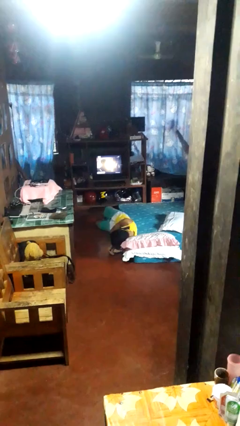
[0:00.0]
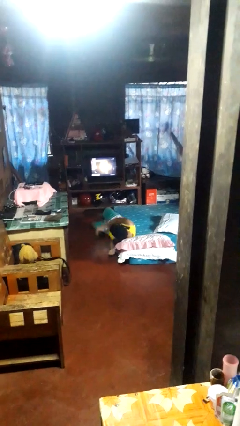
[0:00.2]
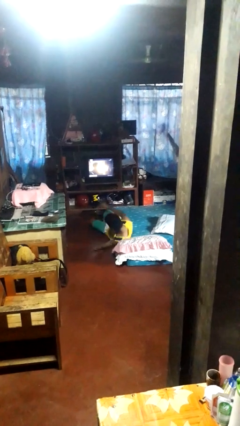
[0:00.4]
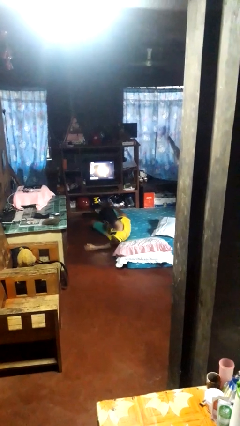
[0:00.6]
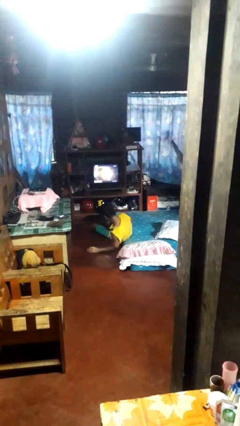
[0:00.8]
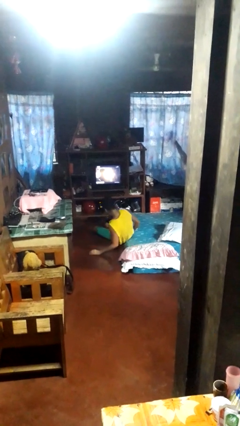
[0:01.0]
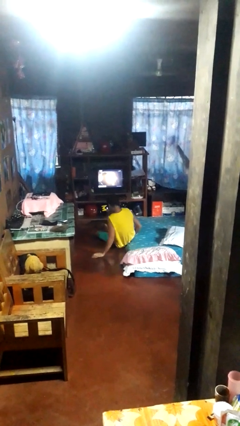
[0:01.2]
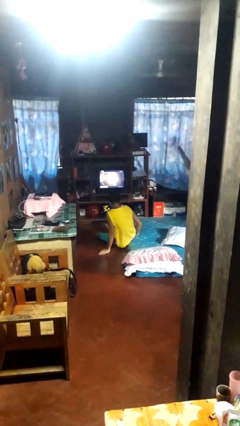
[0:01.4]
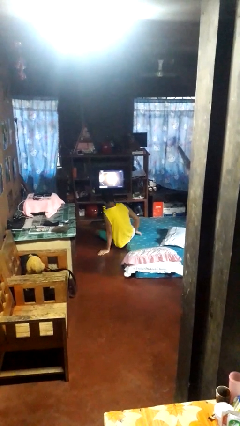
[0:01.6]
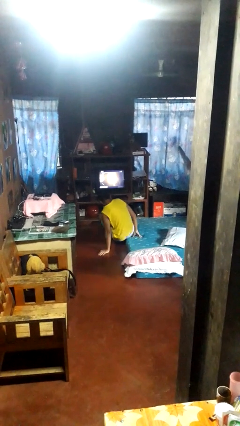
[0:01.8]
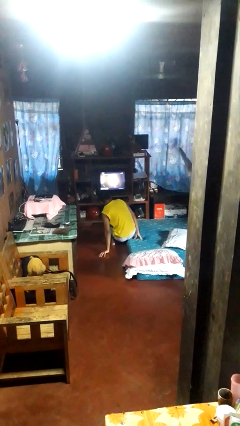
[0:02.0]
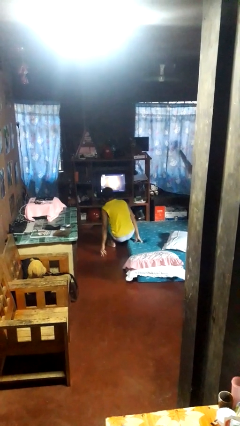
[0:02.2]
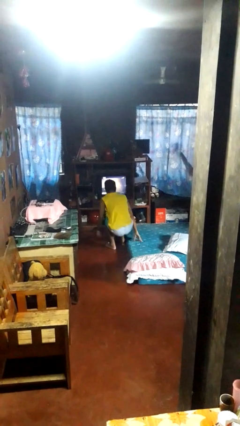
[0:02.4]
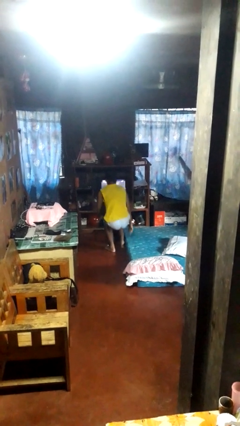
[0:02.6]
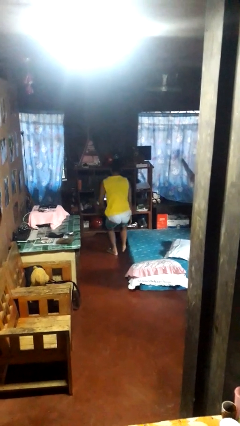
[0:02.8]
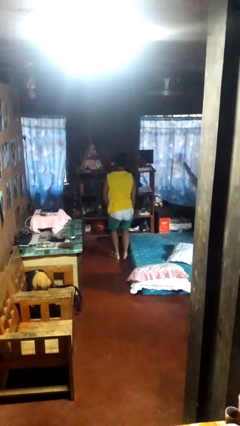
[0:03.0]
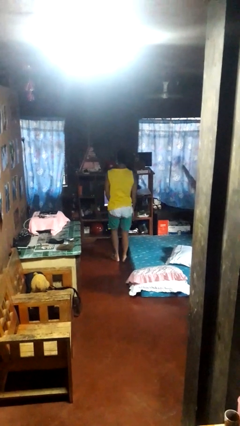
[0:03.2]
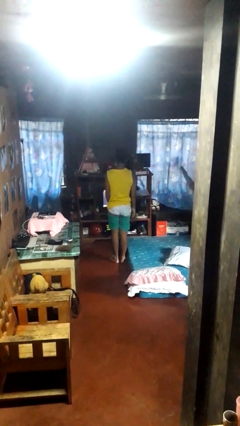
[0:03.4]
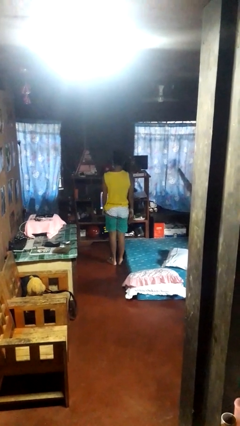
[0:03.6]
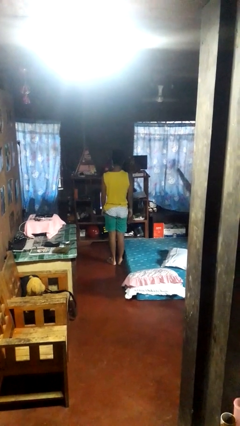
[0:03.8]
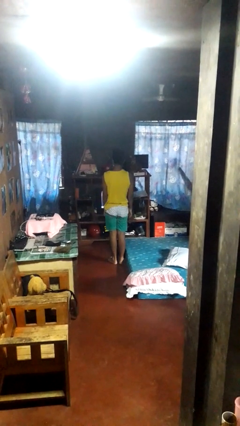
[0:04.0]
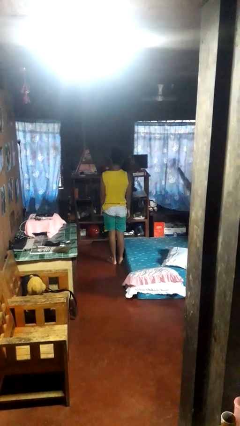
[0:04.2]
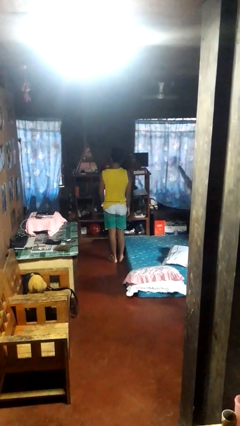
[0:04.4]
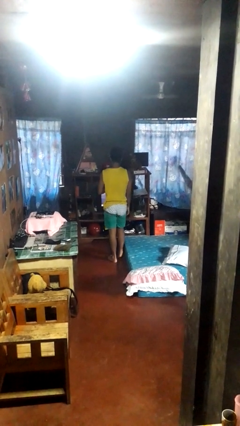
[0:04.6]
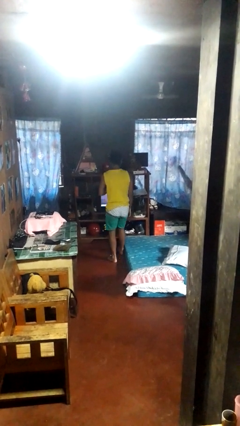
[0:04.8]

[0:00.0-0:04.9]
person stands up from floor

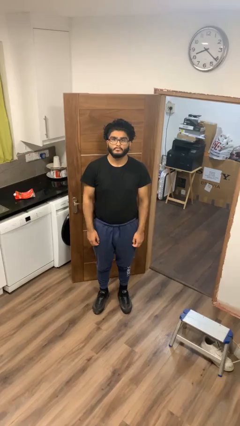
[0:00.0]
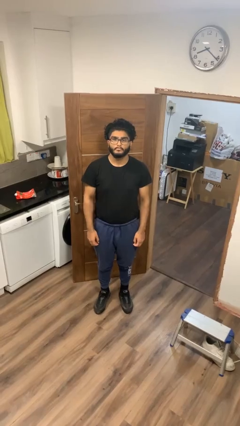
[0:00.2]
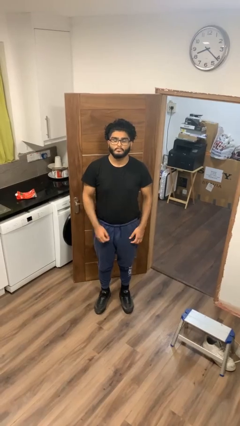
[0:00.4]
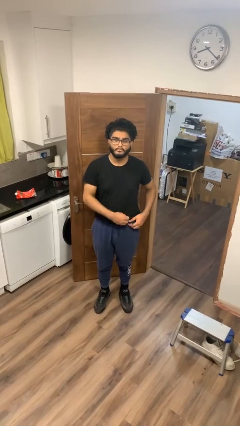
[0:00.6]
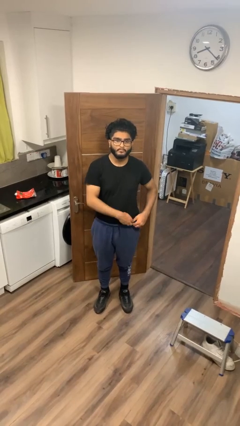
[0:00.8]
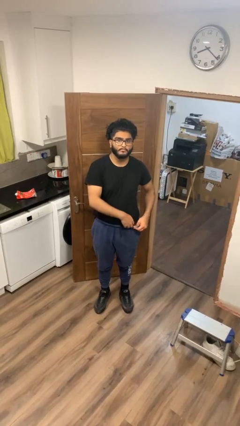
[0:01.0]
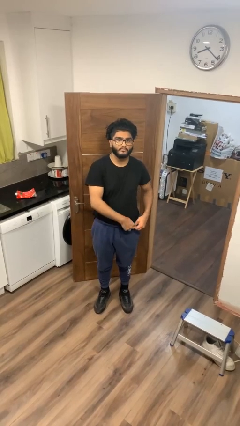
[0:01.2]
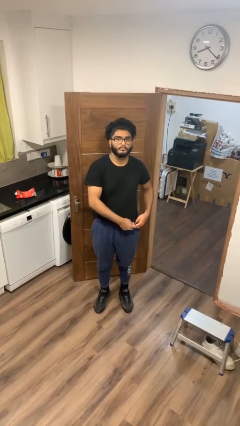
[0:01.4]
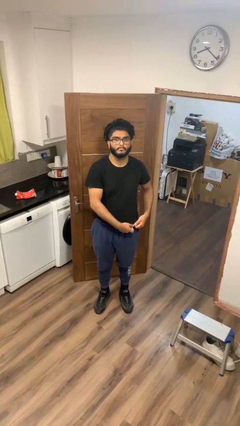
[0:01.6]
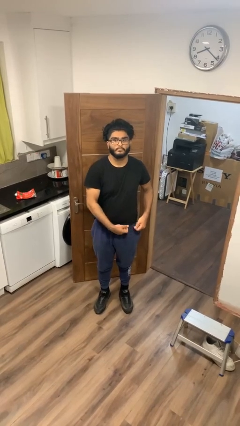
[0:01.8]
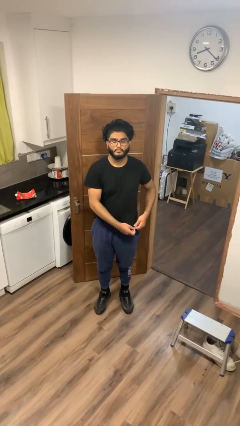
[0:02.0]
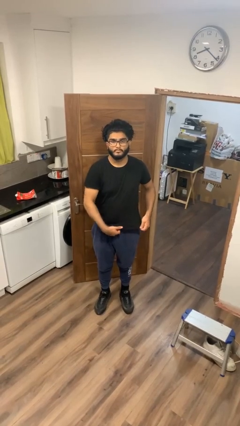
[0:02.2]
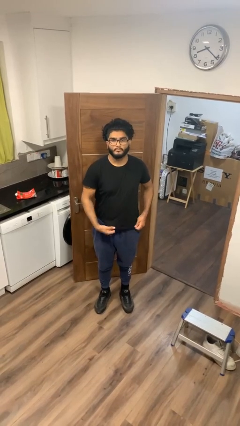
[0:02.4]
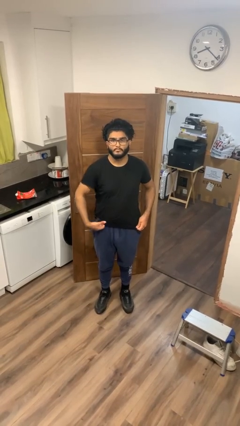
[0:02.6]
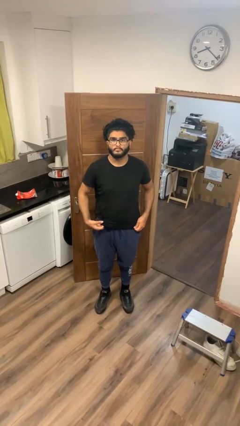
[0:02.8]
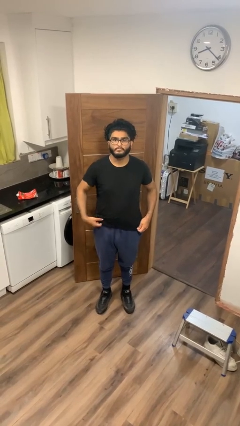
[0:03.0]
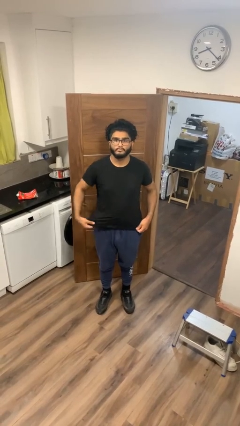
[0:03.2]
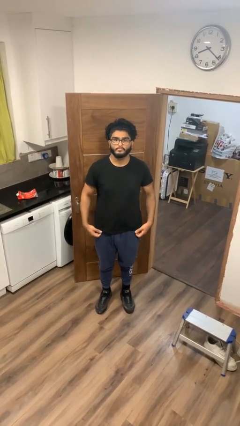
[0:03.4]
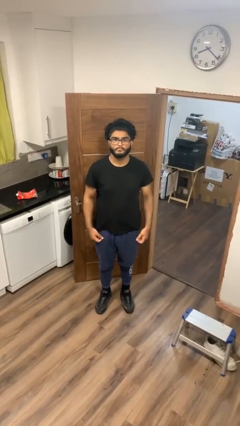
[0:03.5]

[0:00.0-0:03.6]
person untucks shirt

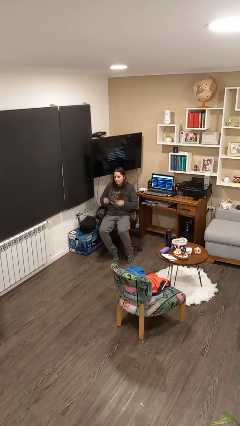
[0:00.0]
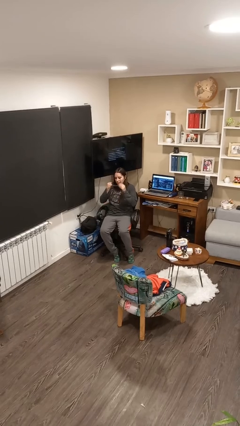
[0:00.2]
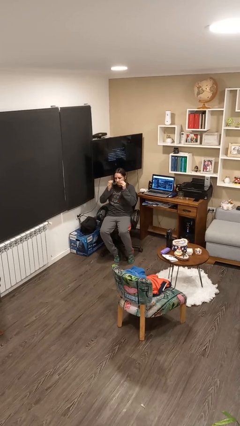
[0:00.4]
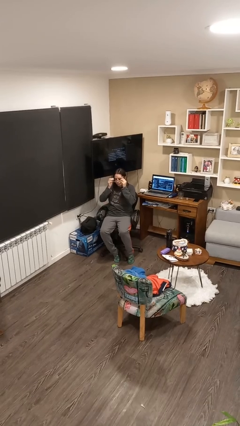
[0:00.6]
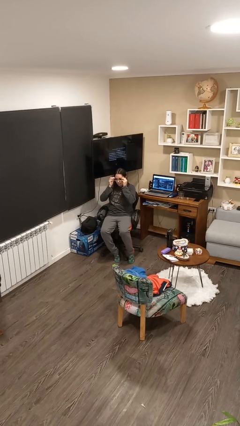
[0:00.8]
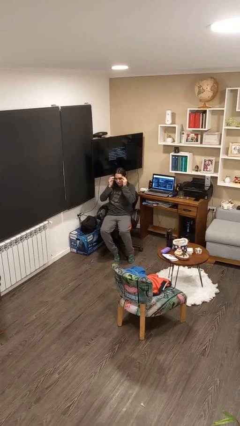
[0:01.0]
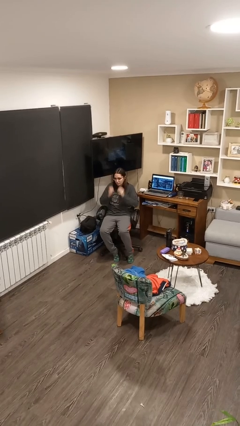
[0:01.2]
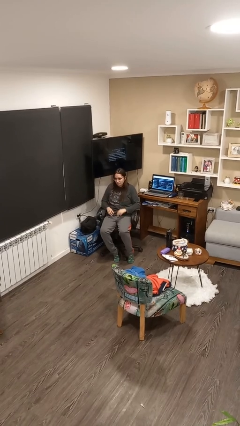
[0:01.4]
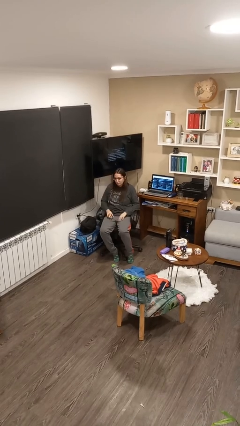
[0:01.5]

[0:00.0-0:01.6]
person puts on glasses

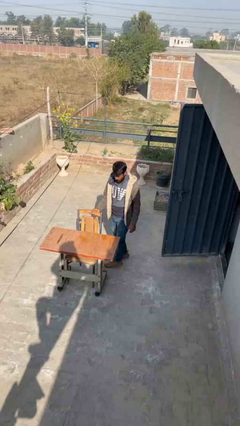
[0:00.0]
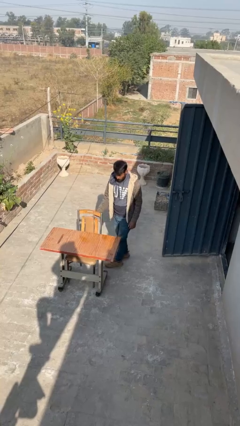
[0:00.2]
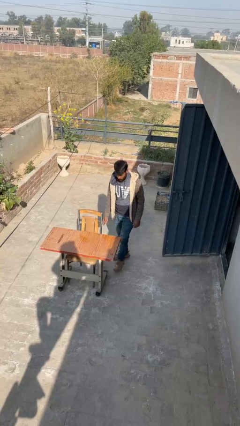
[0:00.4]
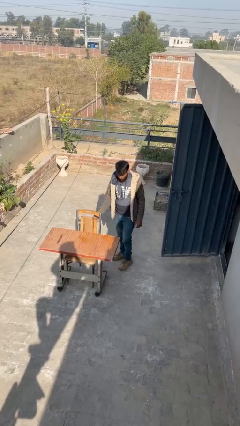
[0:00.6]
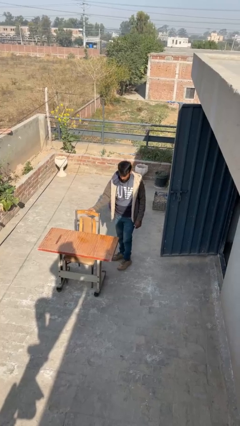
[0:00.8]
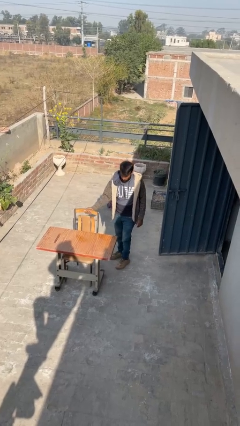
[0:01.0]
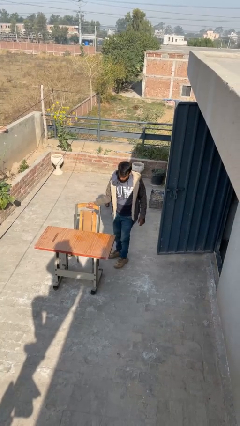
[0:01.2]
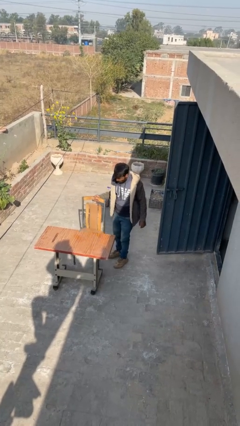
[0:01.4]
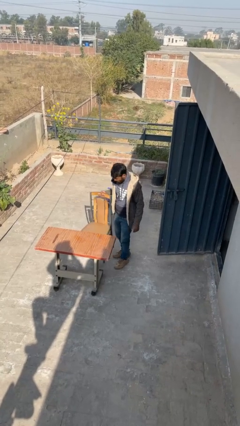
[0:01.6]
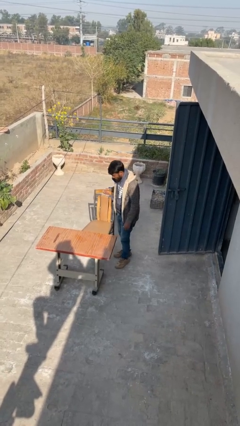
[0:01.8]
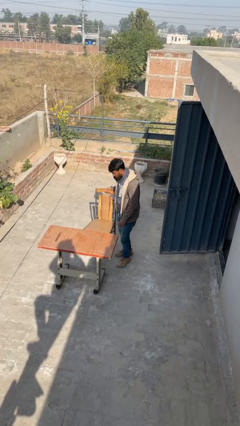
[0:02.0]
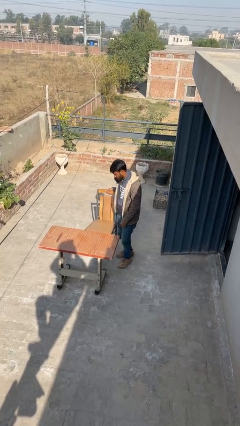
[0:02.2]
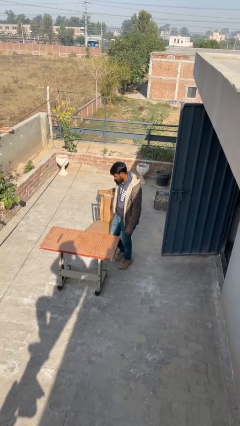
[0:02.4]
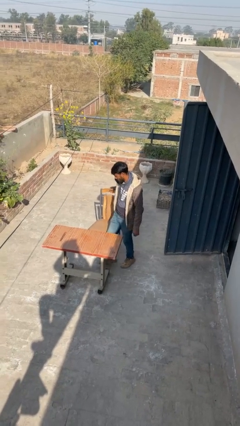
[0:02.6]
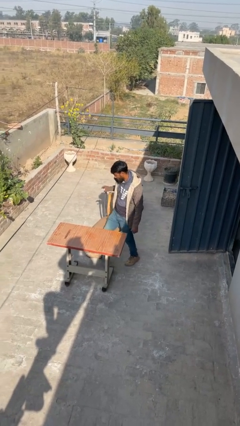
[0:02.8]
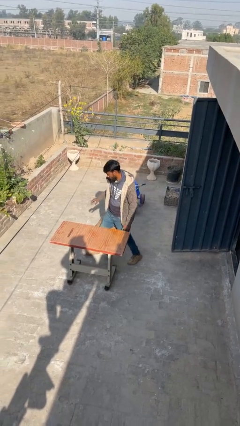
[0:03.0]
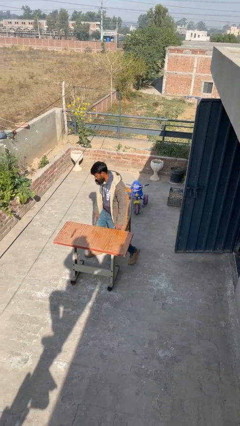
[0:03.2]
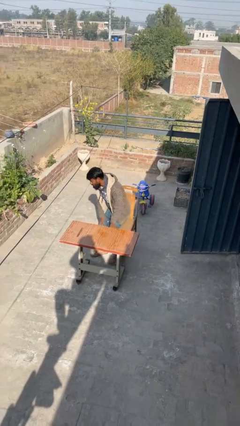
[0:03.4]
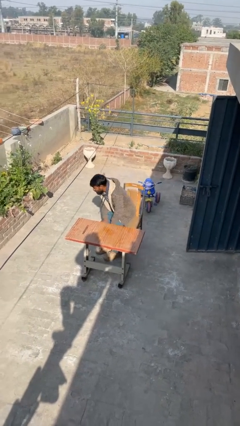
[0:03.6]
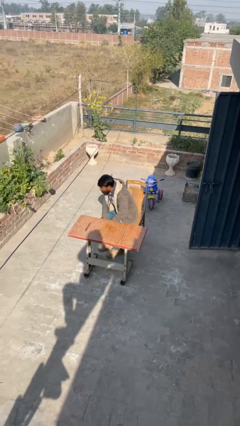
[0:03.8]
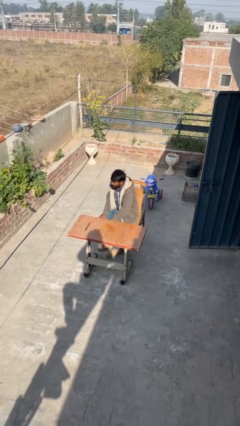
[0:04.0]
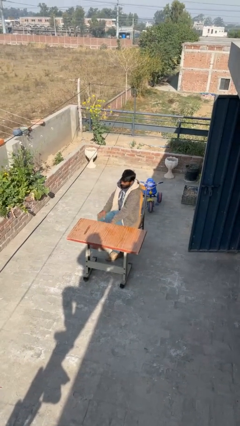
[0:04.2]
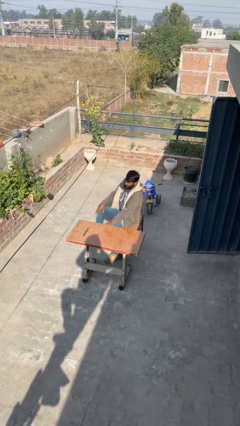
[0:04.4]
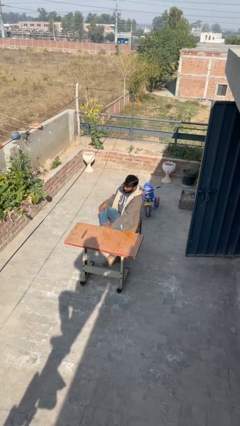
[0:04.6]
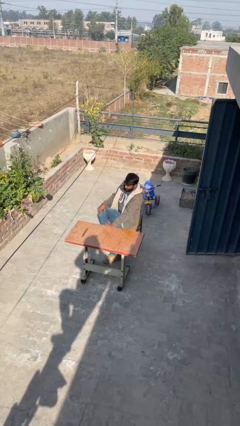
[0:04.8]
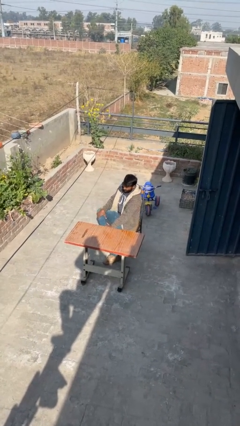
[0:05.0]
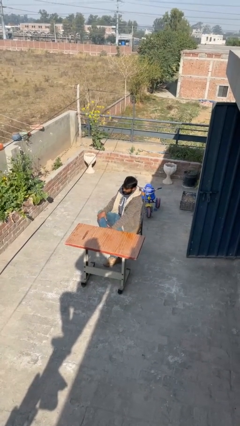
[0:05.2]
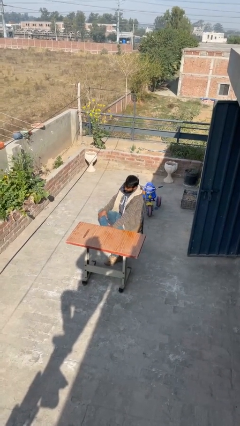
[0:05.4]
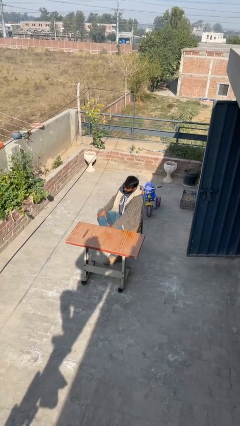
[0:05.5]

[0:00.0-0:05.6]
person sits down

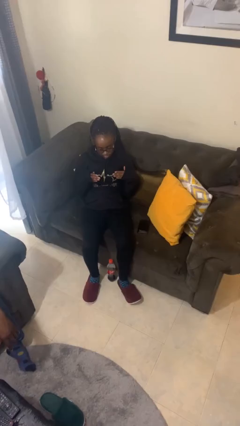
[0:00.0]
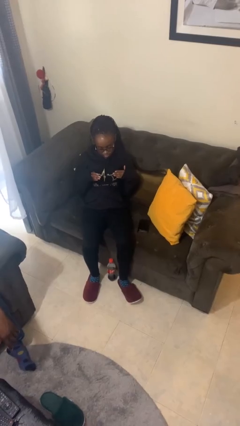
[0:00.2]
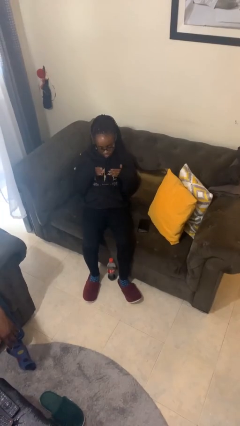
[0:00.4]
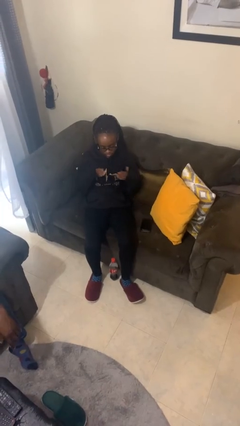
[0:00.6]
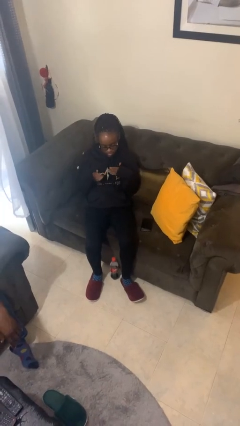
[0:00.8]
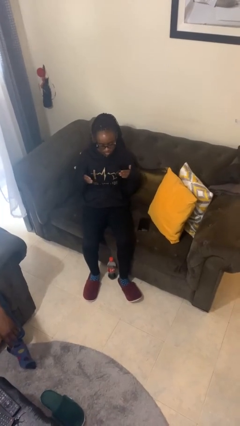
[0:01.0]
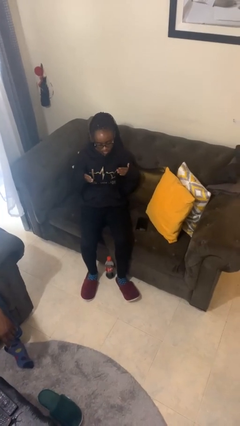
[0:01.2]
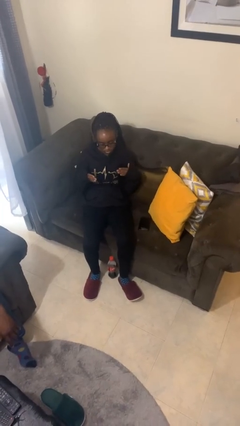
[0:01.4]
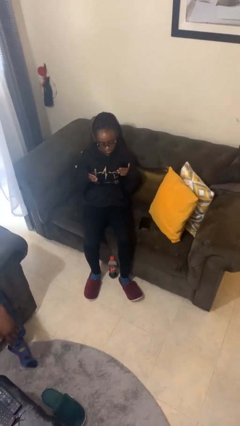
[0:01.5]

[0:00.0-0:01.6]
person drums on chest

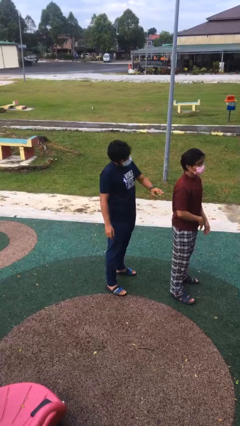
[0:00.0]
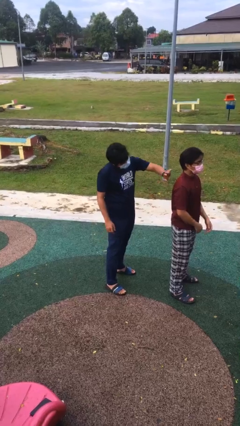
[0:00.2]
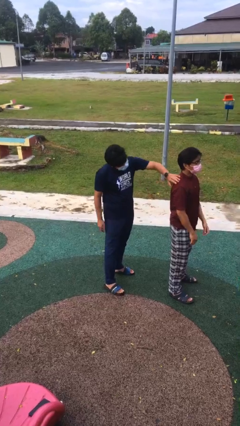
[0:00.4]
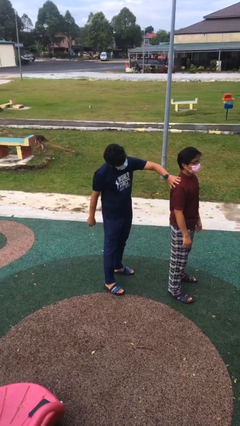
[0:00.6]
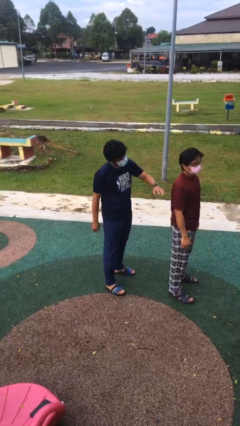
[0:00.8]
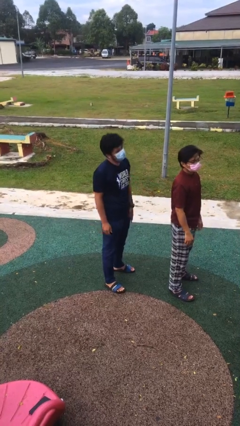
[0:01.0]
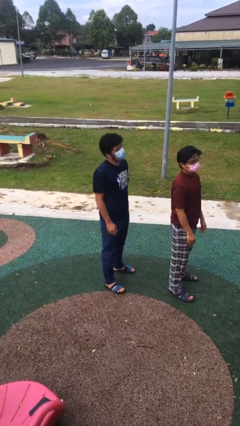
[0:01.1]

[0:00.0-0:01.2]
person touches back of person
